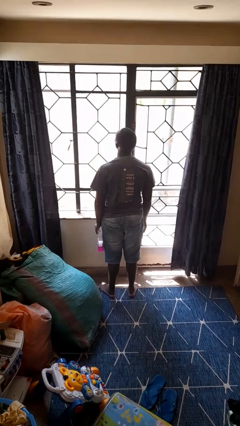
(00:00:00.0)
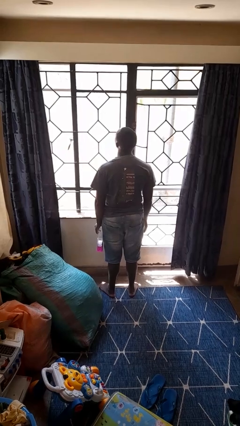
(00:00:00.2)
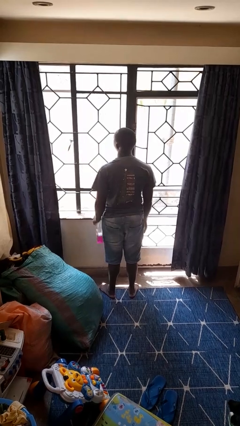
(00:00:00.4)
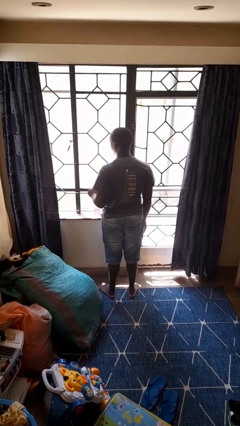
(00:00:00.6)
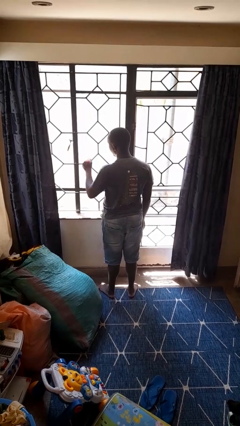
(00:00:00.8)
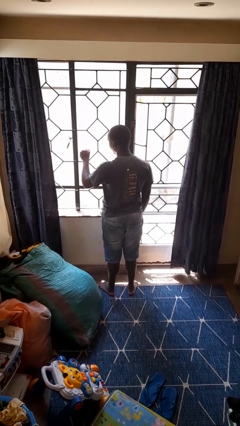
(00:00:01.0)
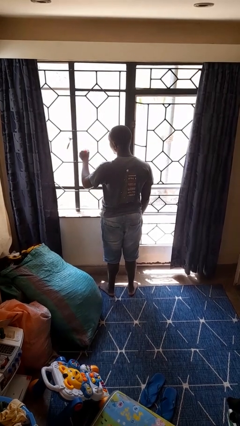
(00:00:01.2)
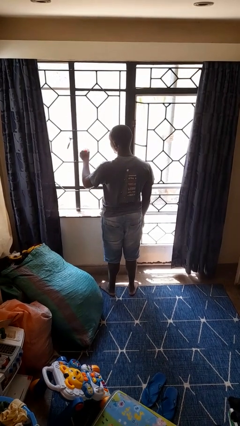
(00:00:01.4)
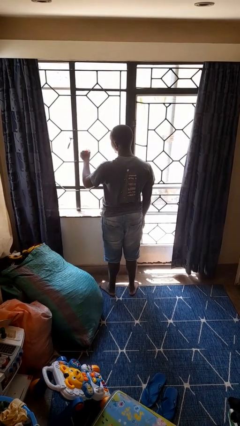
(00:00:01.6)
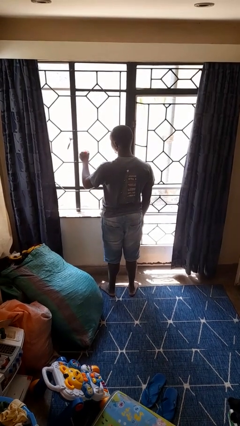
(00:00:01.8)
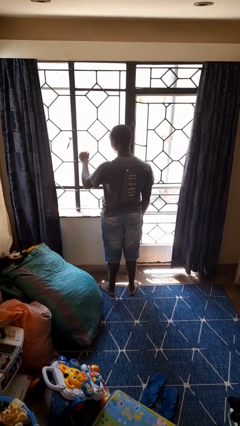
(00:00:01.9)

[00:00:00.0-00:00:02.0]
person sprays from bottle

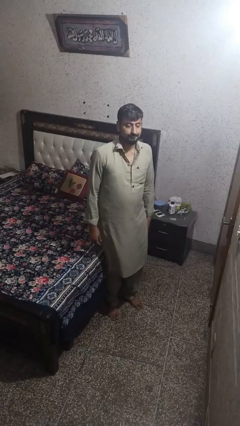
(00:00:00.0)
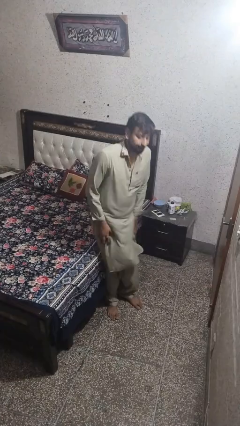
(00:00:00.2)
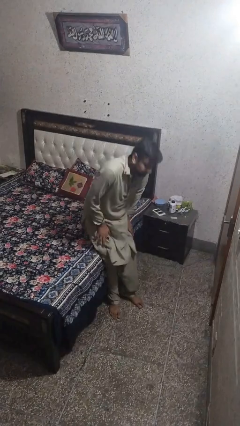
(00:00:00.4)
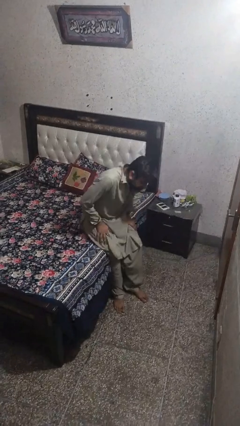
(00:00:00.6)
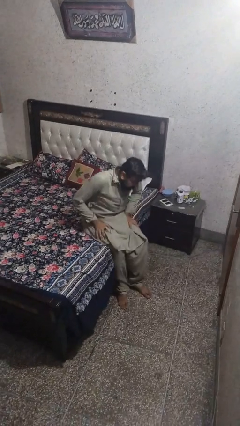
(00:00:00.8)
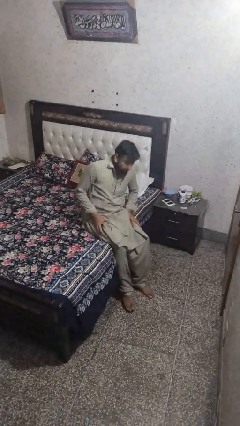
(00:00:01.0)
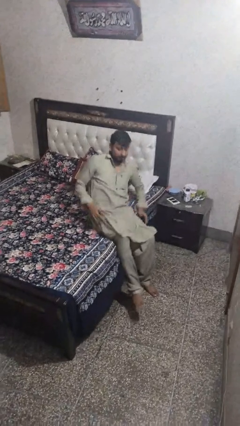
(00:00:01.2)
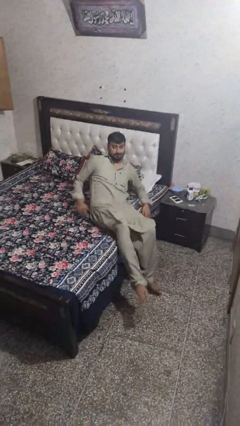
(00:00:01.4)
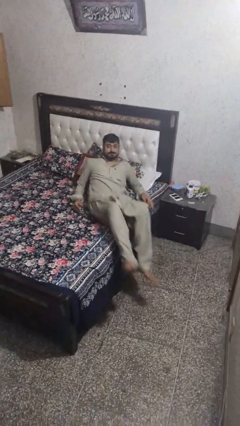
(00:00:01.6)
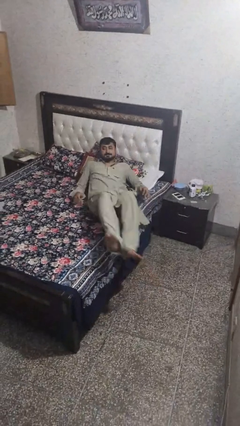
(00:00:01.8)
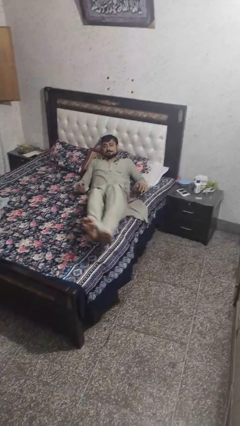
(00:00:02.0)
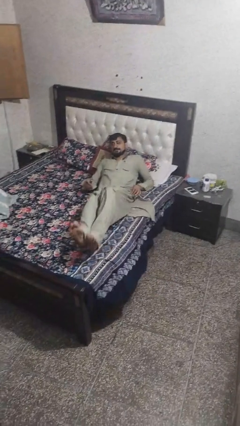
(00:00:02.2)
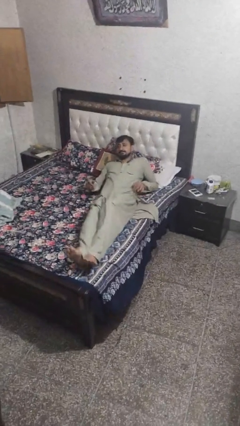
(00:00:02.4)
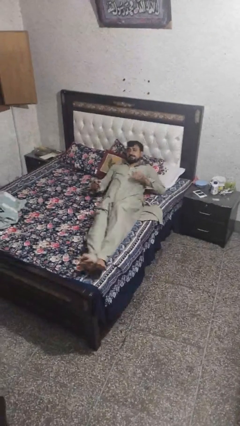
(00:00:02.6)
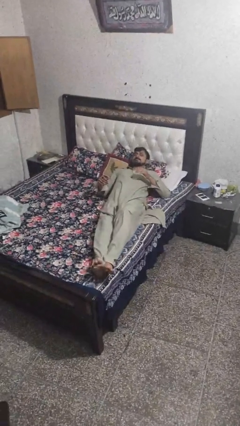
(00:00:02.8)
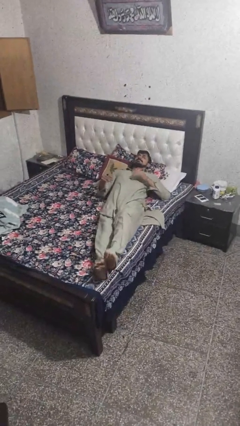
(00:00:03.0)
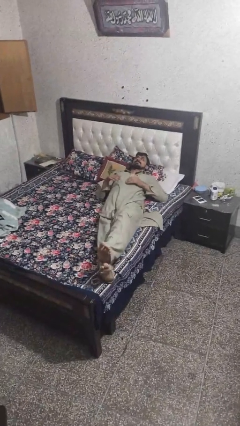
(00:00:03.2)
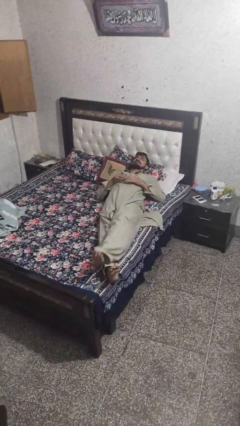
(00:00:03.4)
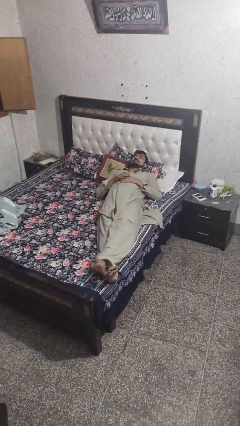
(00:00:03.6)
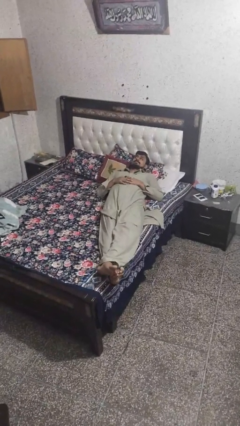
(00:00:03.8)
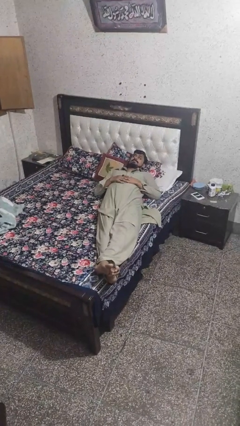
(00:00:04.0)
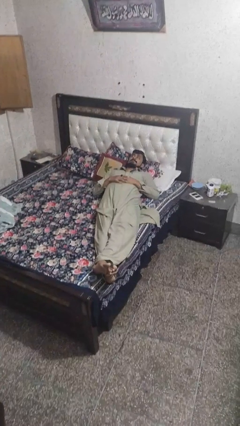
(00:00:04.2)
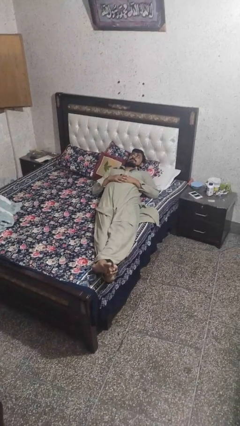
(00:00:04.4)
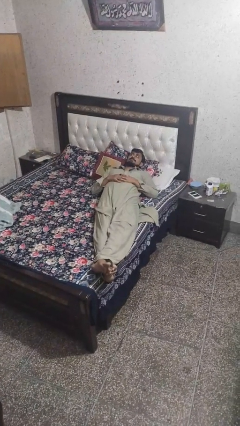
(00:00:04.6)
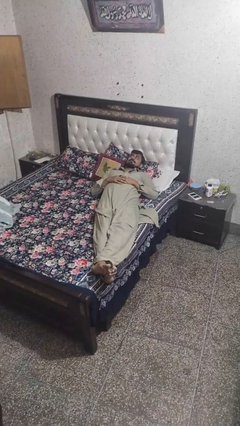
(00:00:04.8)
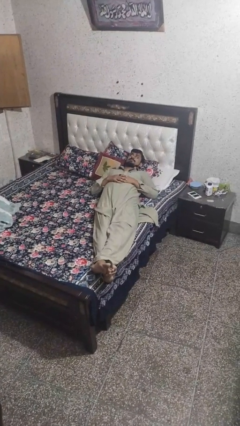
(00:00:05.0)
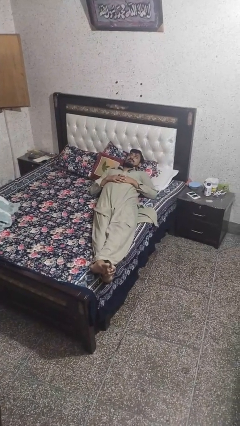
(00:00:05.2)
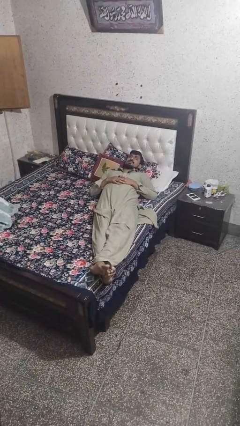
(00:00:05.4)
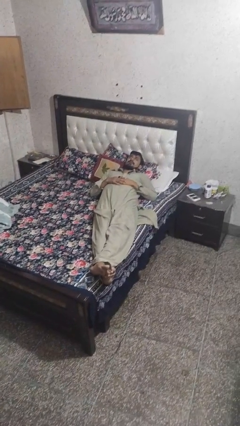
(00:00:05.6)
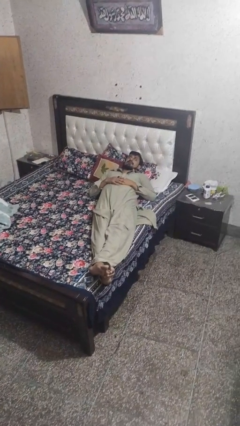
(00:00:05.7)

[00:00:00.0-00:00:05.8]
person lies down on bed

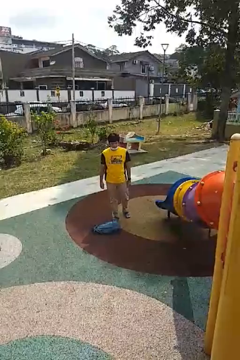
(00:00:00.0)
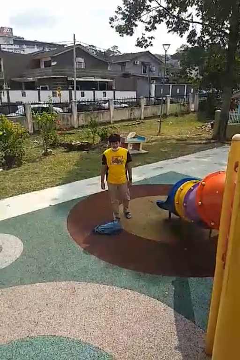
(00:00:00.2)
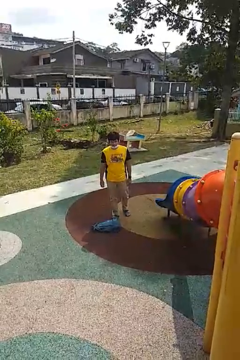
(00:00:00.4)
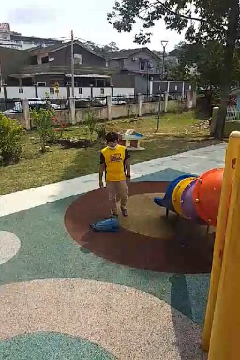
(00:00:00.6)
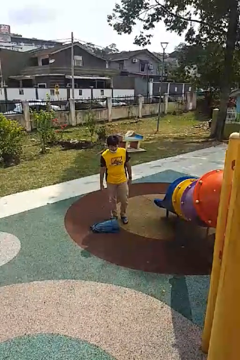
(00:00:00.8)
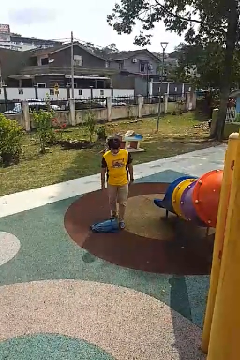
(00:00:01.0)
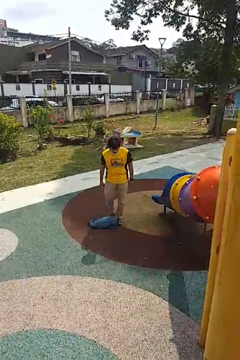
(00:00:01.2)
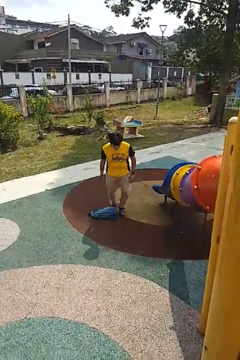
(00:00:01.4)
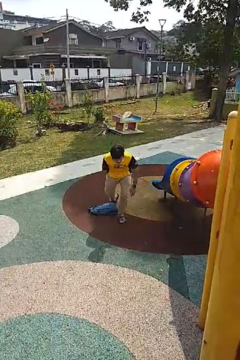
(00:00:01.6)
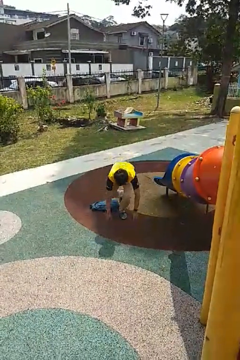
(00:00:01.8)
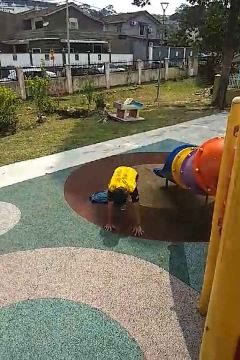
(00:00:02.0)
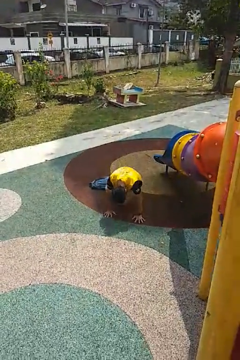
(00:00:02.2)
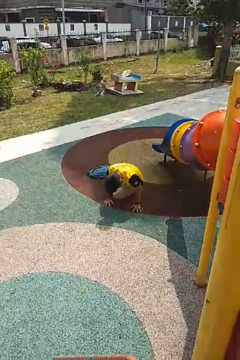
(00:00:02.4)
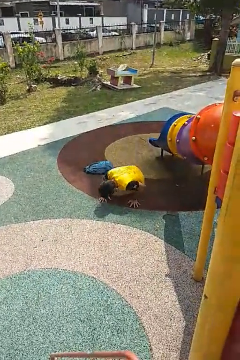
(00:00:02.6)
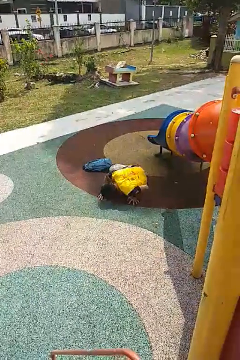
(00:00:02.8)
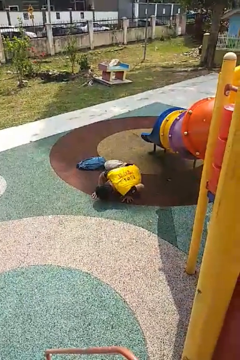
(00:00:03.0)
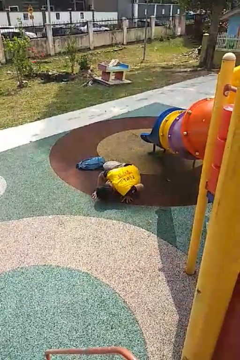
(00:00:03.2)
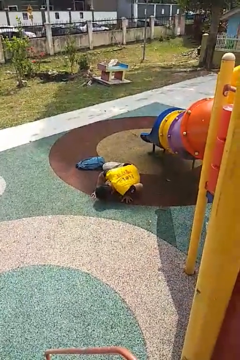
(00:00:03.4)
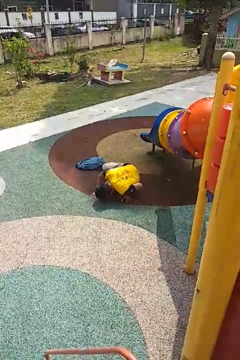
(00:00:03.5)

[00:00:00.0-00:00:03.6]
person trips on object on floor

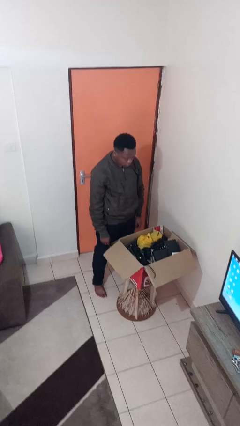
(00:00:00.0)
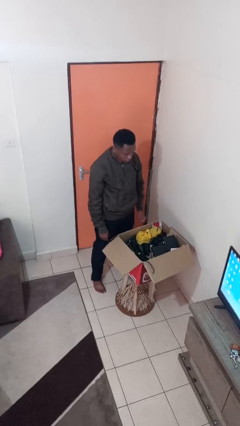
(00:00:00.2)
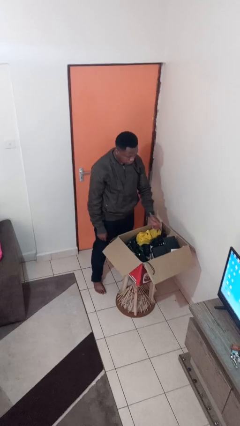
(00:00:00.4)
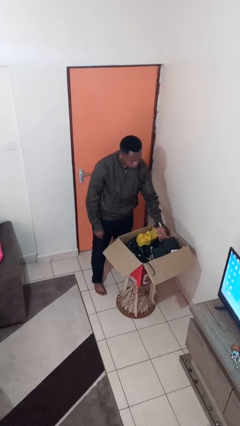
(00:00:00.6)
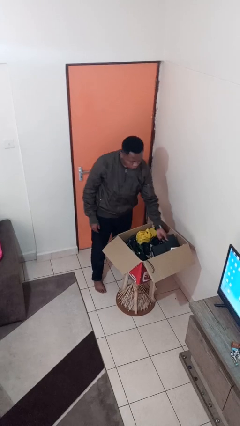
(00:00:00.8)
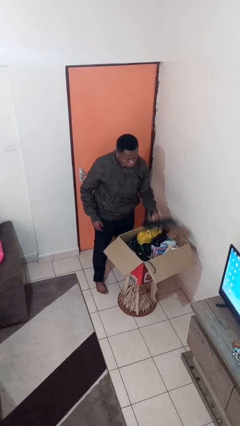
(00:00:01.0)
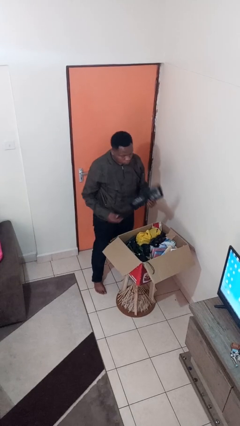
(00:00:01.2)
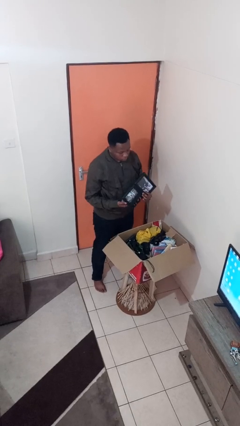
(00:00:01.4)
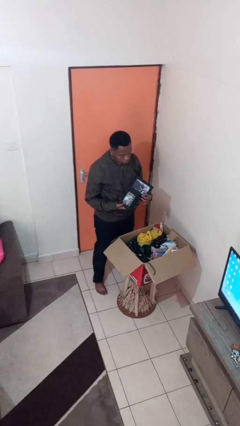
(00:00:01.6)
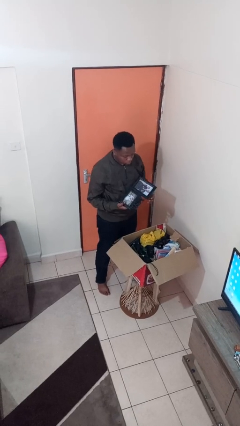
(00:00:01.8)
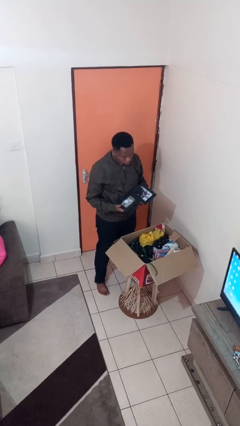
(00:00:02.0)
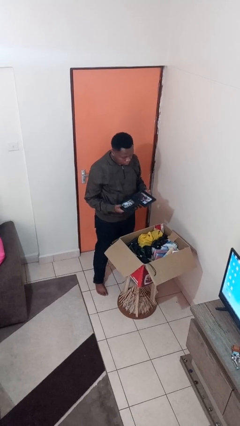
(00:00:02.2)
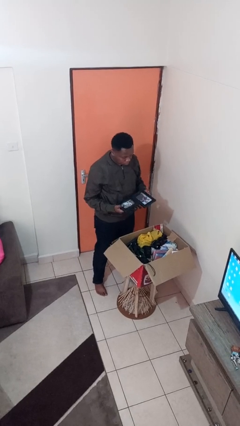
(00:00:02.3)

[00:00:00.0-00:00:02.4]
person takes object from box

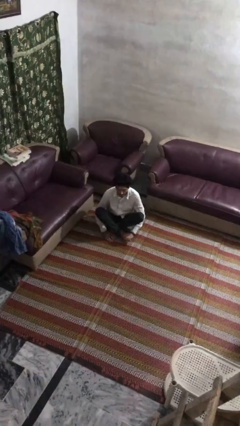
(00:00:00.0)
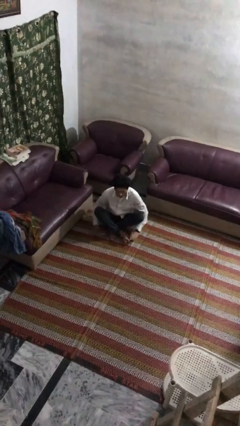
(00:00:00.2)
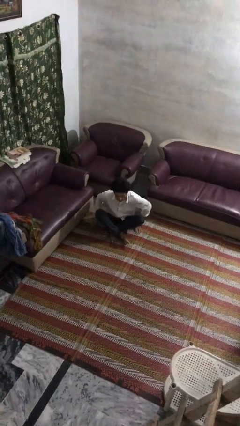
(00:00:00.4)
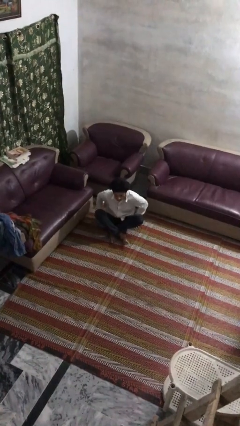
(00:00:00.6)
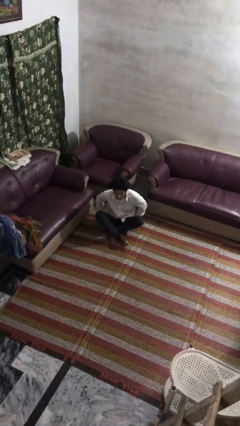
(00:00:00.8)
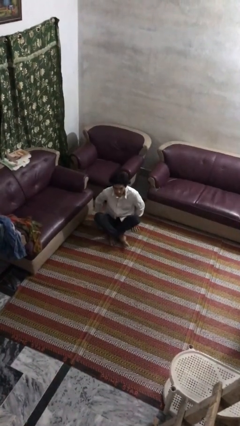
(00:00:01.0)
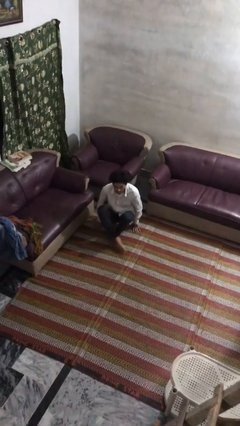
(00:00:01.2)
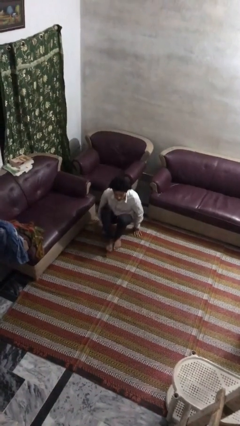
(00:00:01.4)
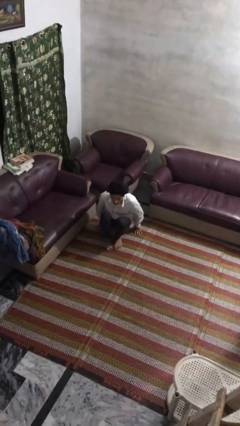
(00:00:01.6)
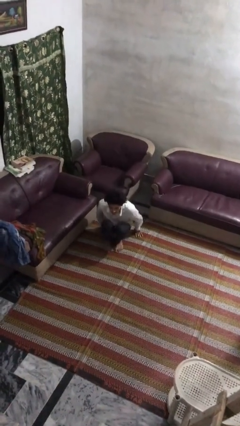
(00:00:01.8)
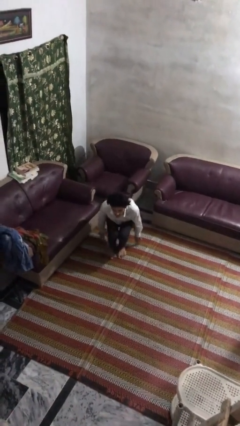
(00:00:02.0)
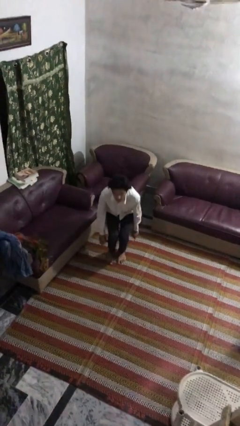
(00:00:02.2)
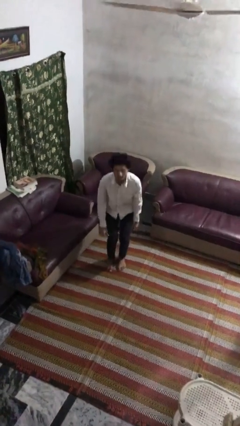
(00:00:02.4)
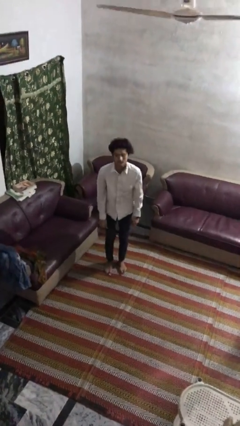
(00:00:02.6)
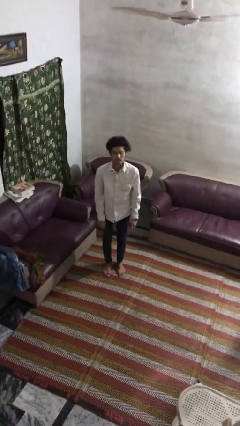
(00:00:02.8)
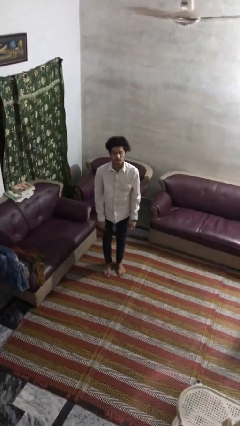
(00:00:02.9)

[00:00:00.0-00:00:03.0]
person stands up from floor

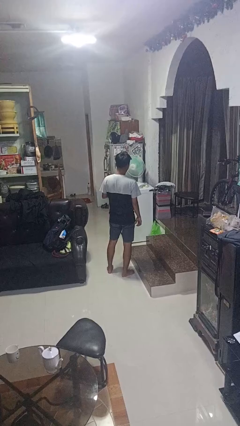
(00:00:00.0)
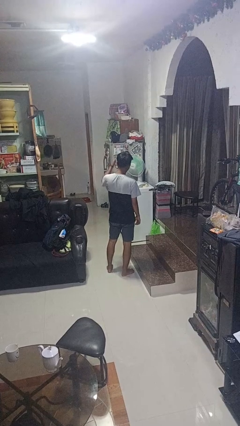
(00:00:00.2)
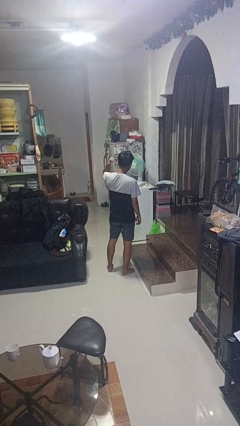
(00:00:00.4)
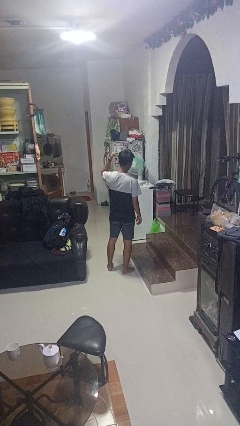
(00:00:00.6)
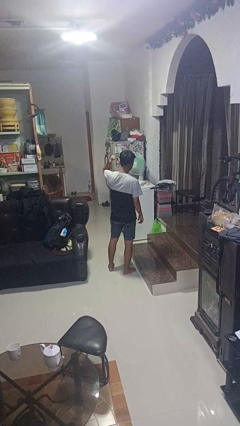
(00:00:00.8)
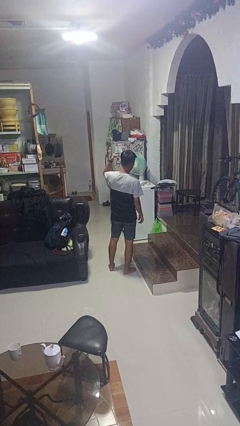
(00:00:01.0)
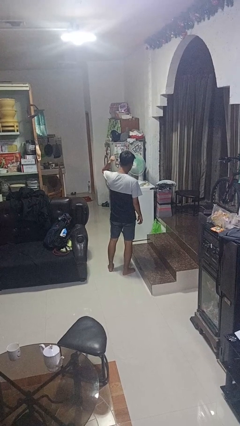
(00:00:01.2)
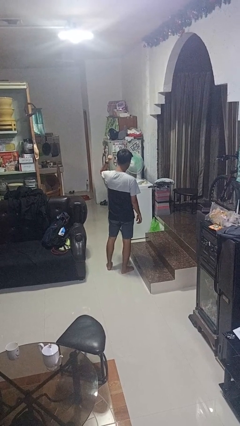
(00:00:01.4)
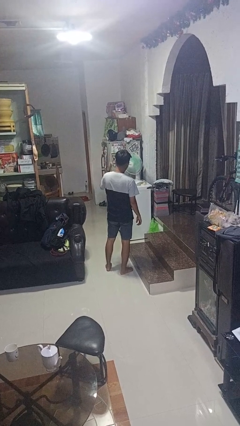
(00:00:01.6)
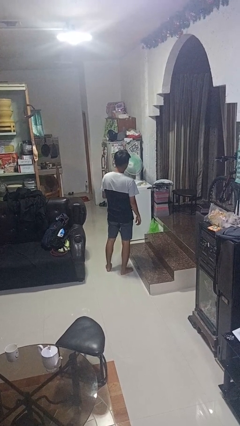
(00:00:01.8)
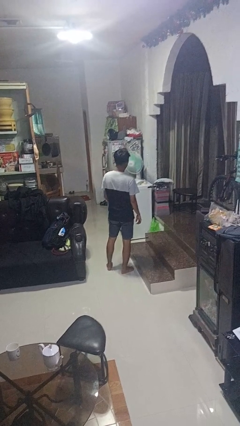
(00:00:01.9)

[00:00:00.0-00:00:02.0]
person gestures behind me
